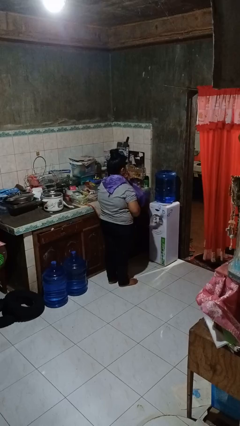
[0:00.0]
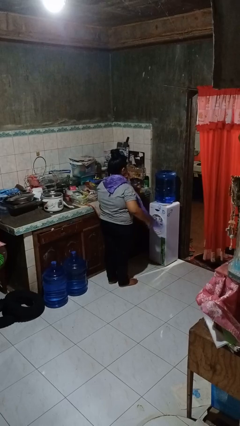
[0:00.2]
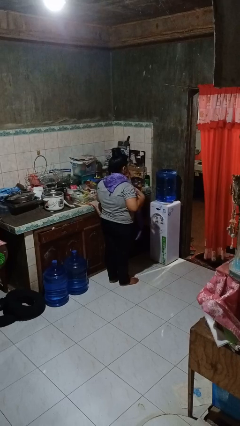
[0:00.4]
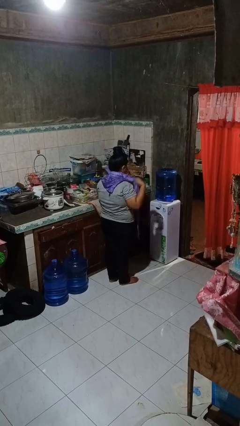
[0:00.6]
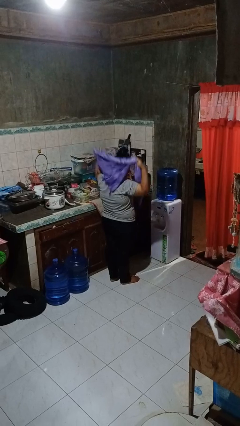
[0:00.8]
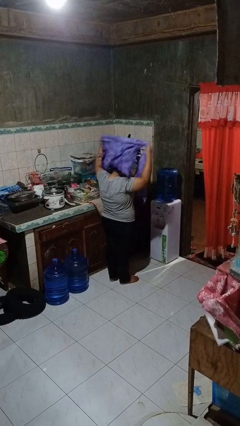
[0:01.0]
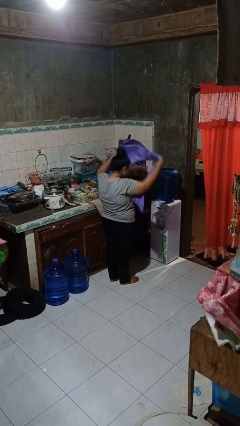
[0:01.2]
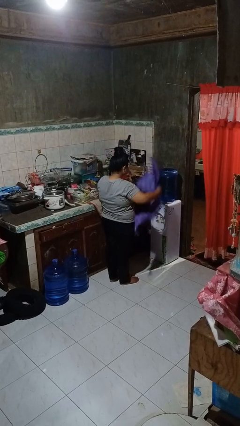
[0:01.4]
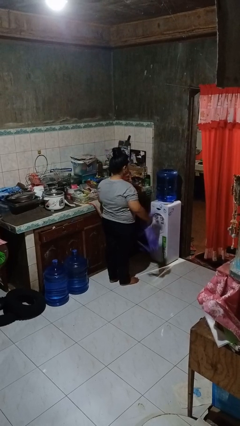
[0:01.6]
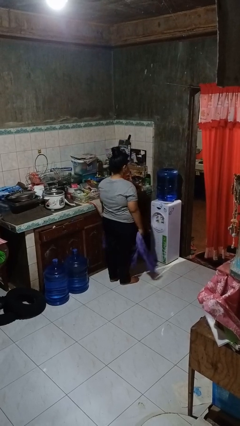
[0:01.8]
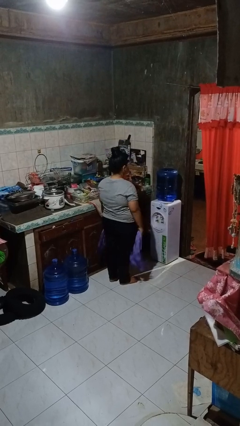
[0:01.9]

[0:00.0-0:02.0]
person takes off scarf

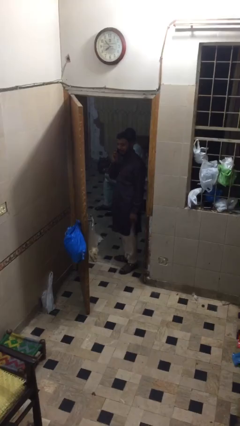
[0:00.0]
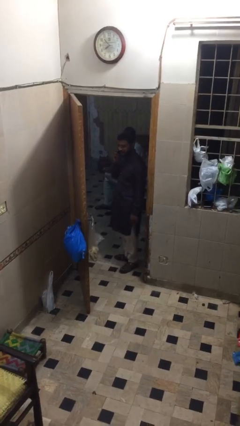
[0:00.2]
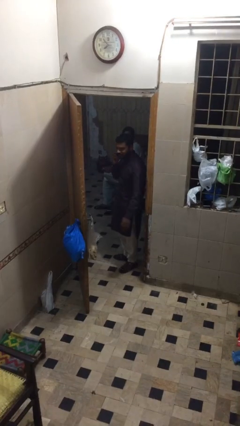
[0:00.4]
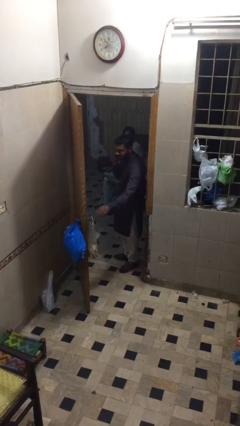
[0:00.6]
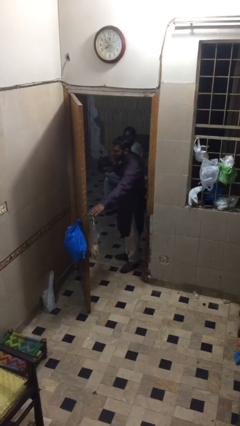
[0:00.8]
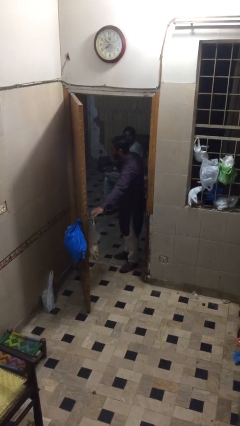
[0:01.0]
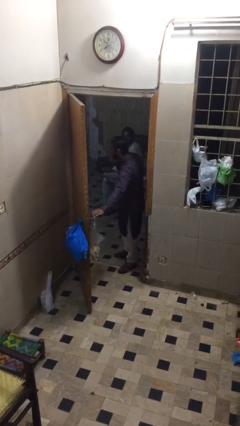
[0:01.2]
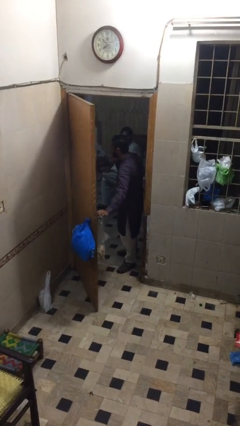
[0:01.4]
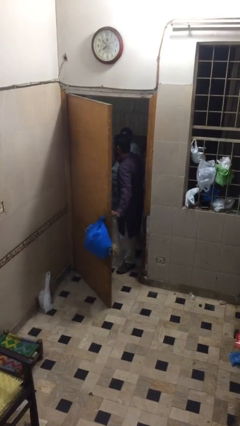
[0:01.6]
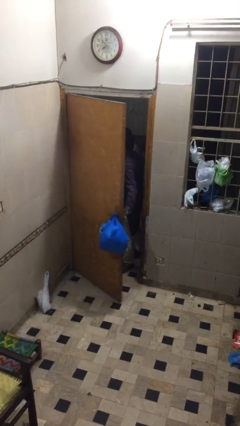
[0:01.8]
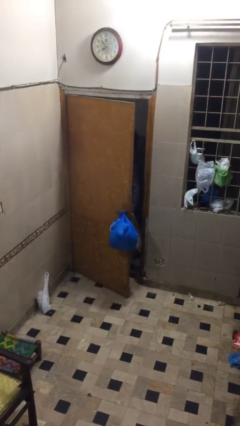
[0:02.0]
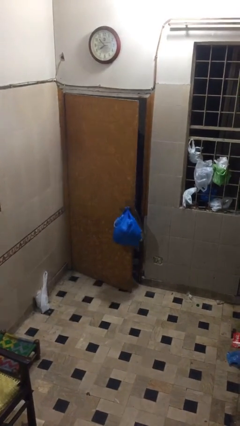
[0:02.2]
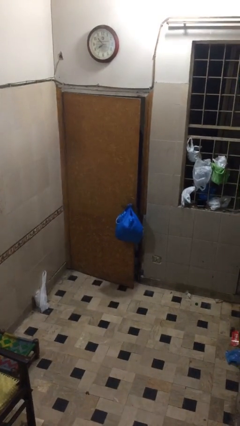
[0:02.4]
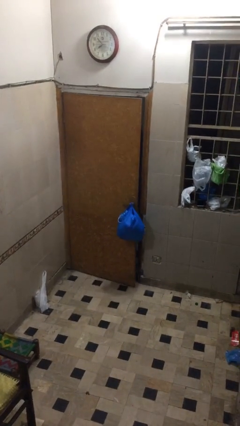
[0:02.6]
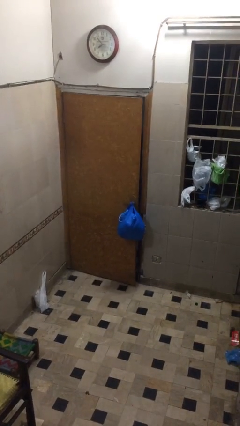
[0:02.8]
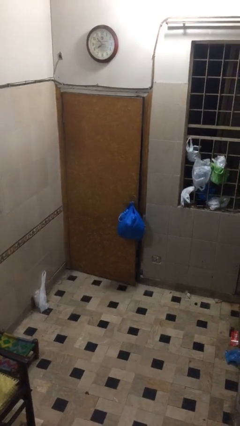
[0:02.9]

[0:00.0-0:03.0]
person closes facility door

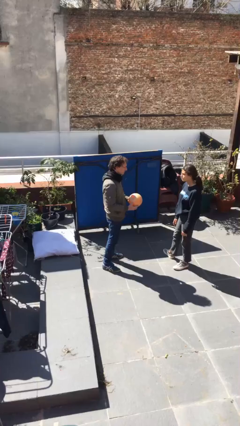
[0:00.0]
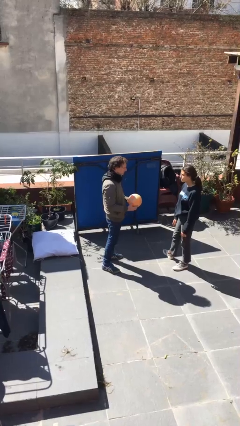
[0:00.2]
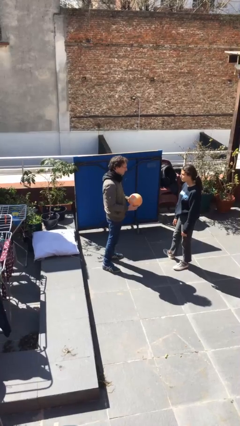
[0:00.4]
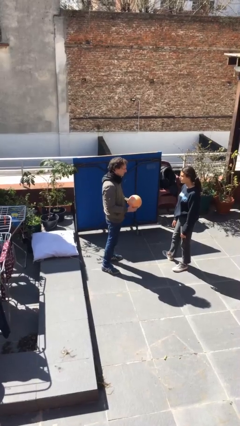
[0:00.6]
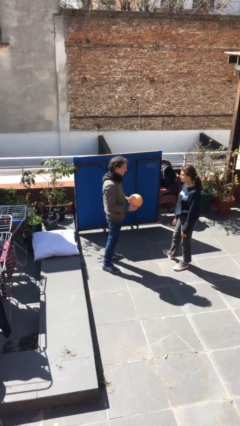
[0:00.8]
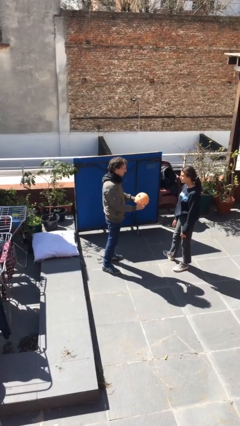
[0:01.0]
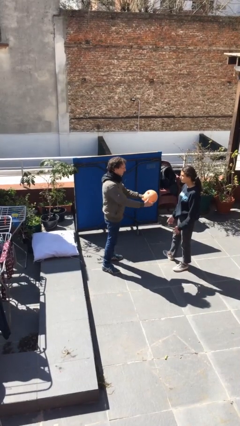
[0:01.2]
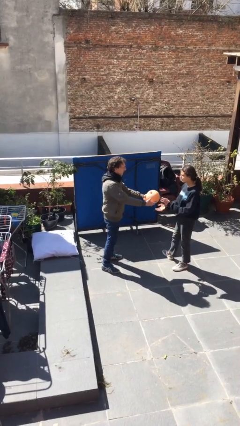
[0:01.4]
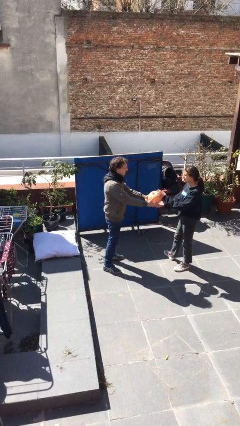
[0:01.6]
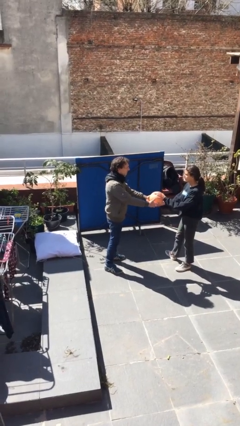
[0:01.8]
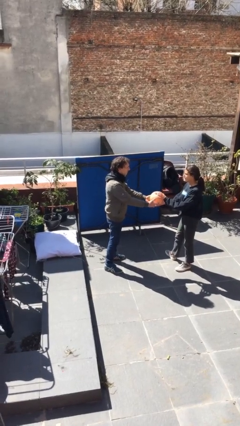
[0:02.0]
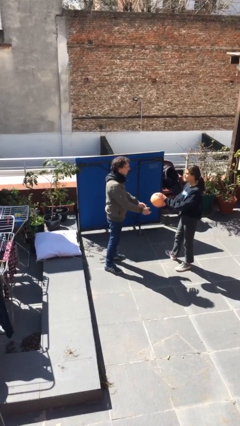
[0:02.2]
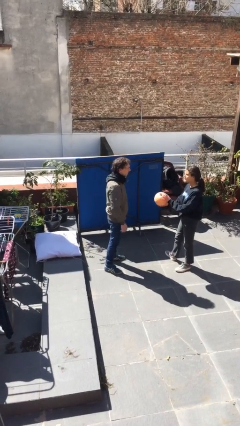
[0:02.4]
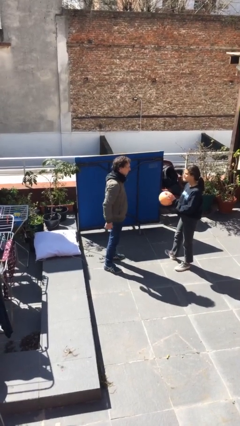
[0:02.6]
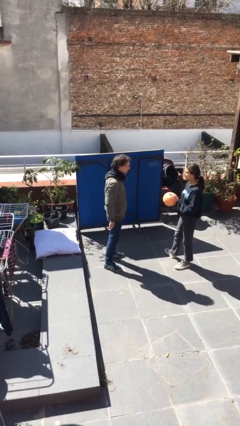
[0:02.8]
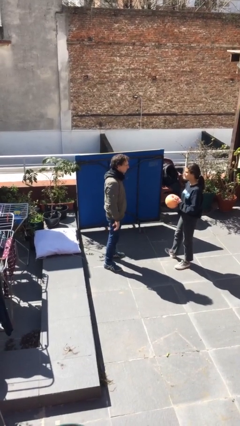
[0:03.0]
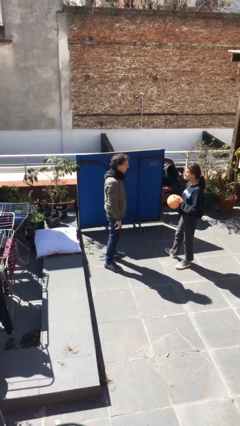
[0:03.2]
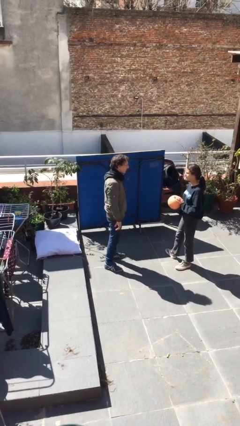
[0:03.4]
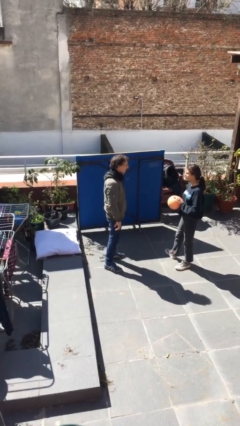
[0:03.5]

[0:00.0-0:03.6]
person transfers object to person

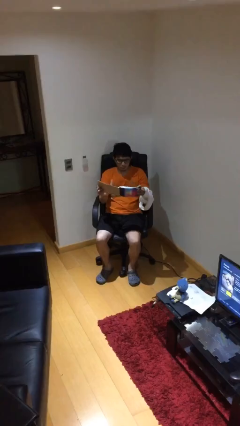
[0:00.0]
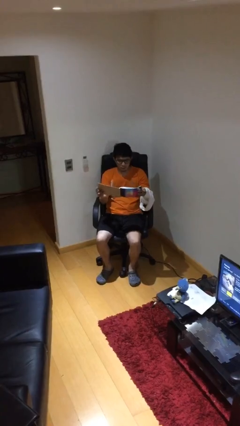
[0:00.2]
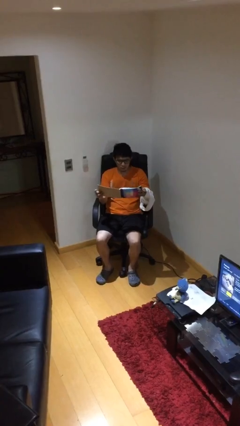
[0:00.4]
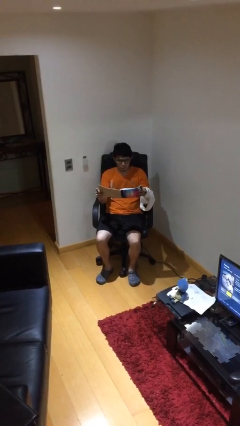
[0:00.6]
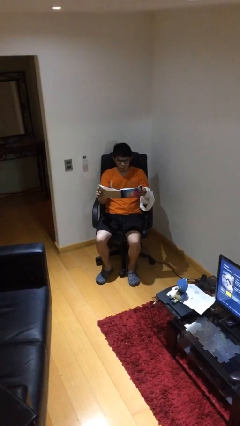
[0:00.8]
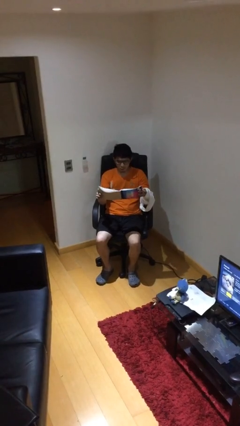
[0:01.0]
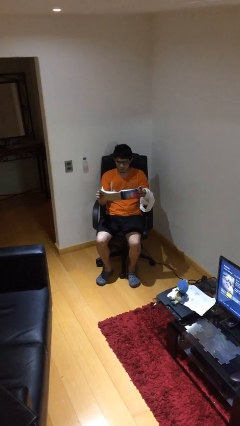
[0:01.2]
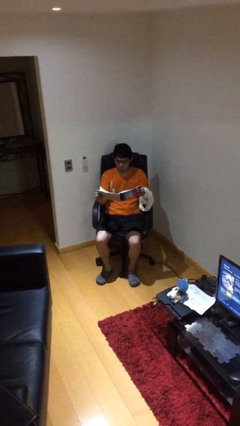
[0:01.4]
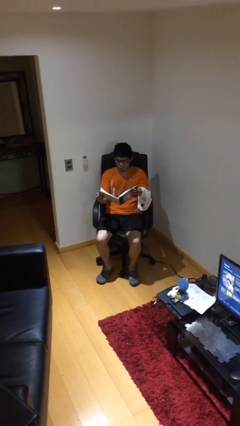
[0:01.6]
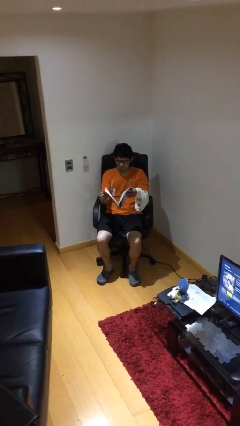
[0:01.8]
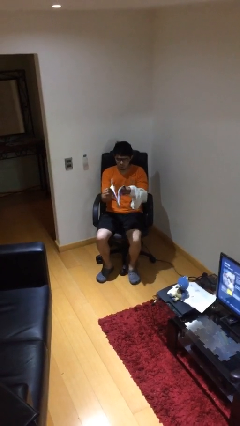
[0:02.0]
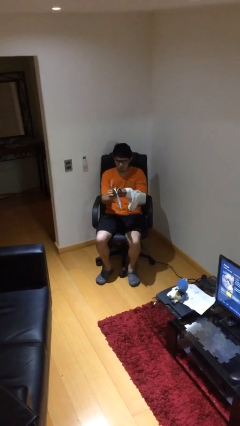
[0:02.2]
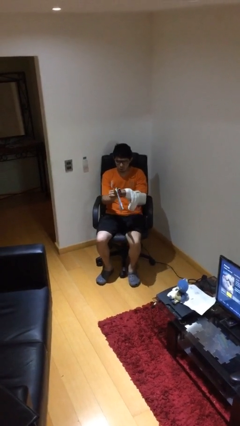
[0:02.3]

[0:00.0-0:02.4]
person reads document

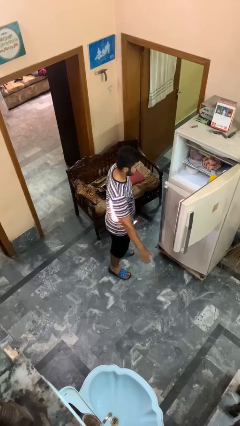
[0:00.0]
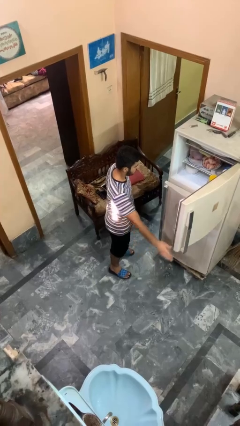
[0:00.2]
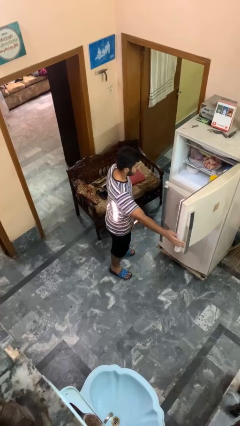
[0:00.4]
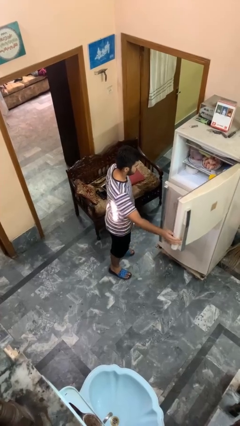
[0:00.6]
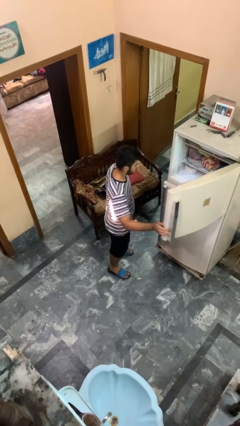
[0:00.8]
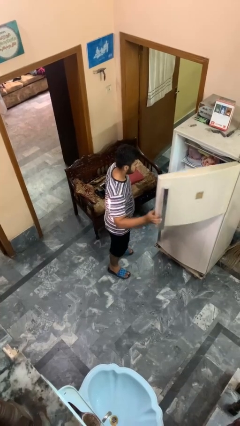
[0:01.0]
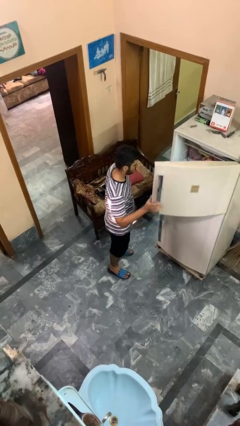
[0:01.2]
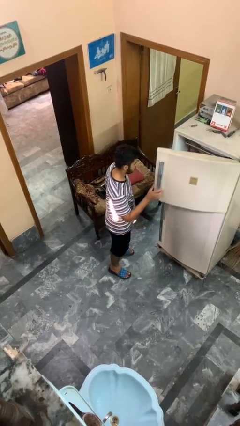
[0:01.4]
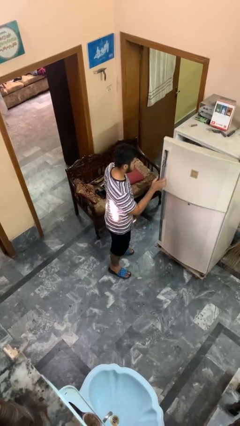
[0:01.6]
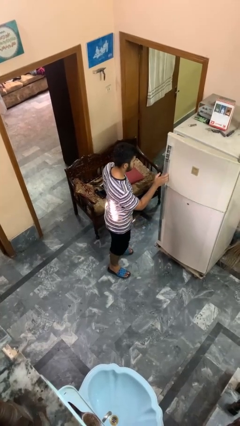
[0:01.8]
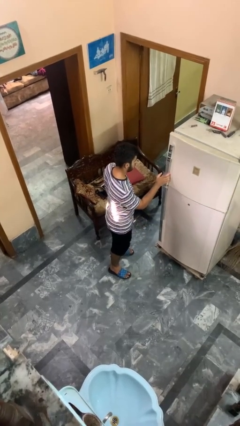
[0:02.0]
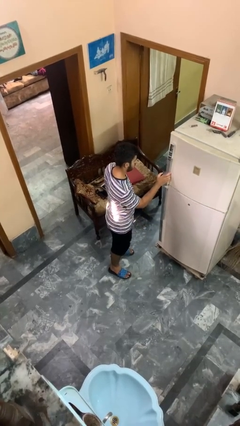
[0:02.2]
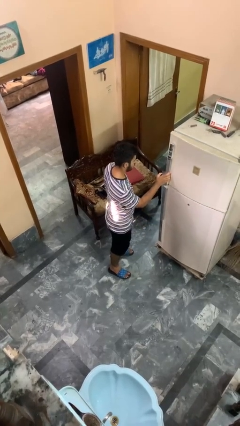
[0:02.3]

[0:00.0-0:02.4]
person closes refrigerator

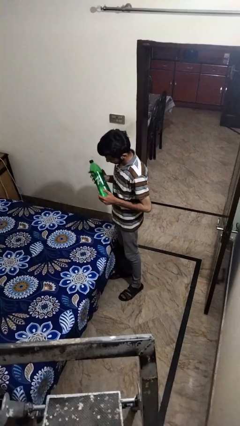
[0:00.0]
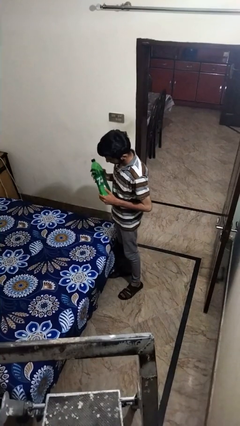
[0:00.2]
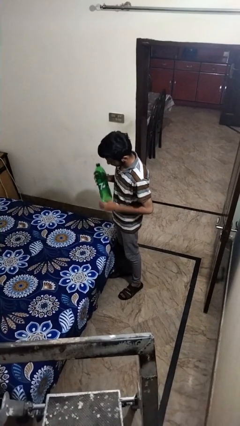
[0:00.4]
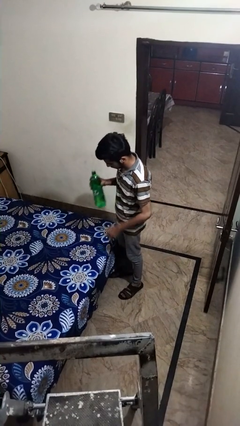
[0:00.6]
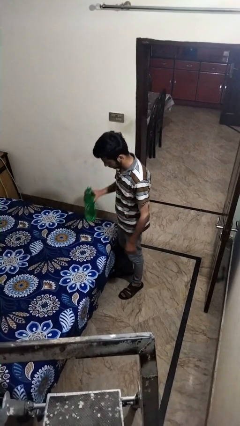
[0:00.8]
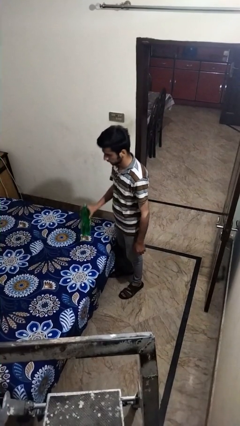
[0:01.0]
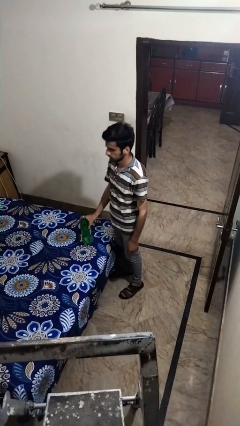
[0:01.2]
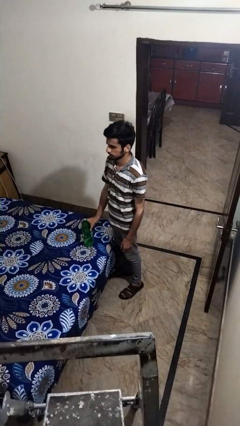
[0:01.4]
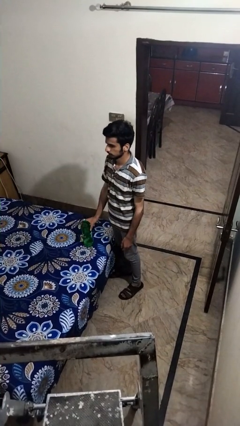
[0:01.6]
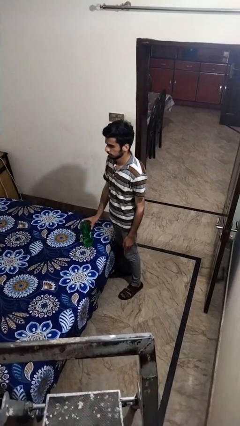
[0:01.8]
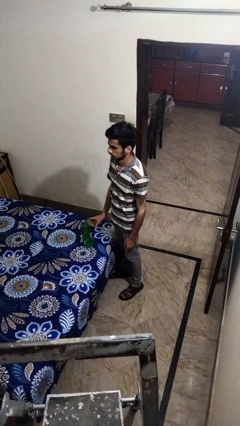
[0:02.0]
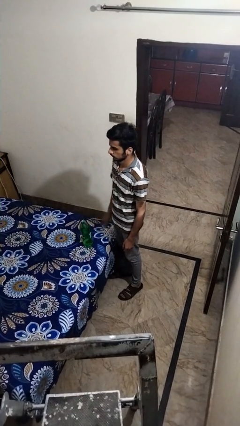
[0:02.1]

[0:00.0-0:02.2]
person puts down object on bed

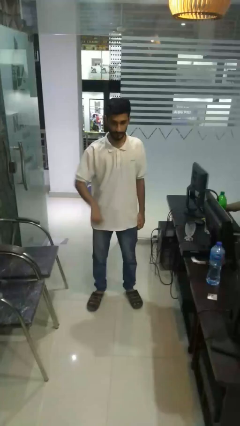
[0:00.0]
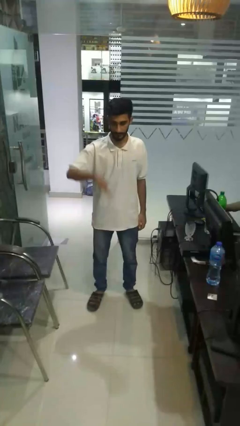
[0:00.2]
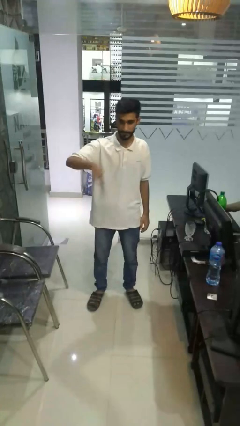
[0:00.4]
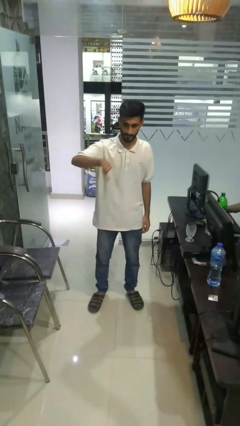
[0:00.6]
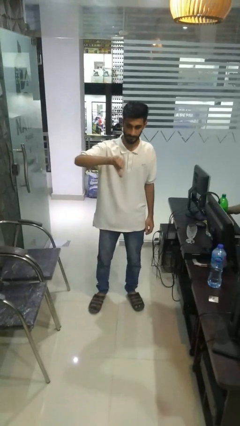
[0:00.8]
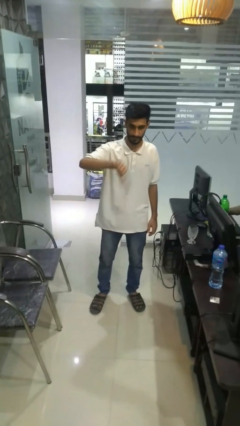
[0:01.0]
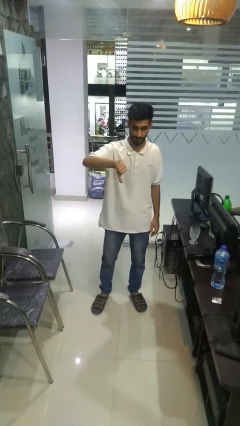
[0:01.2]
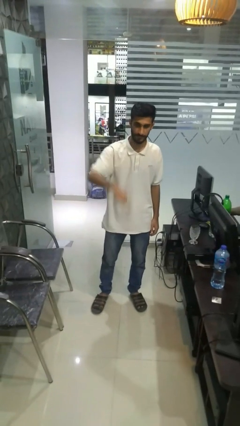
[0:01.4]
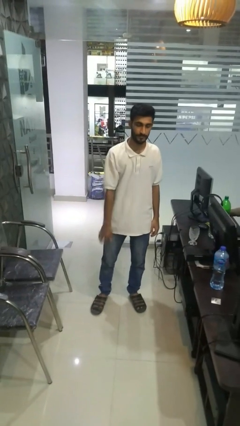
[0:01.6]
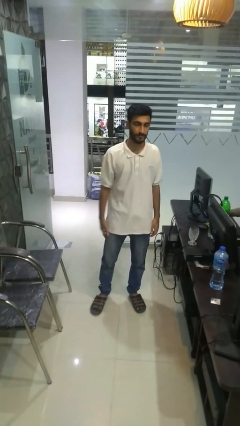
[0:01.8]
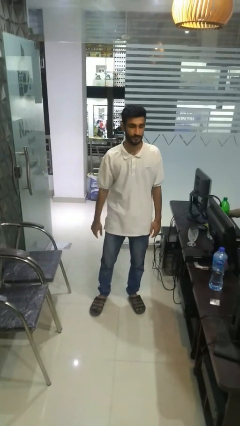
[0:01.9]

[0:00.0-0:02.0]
person gestures thumbs down
